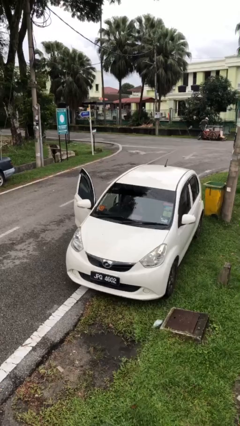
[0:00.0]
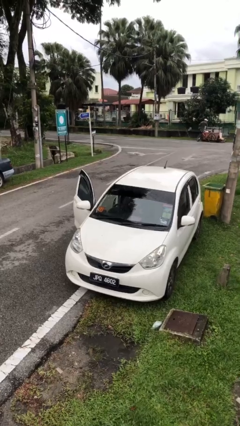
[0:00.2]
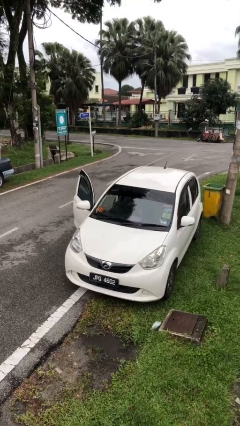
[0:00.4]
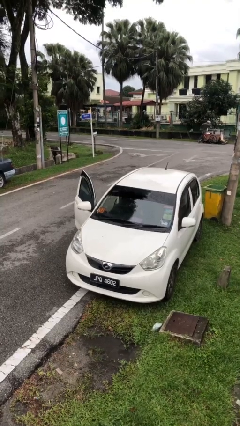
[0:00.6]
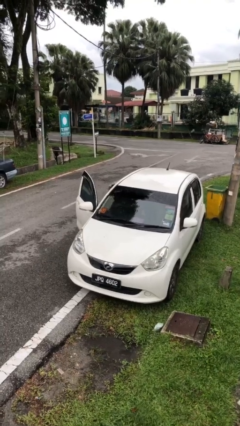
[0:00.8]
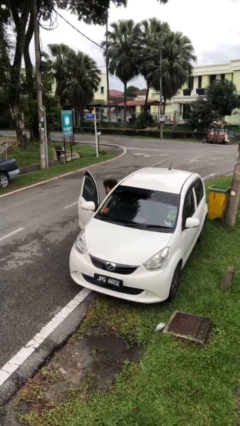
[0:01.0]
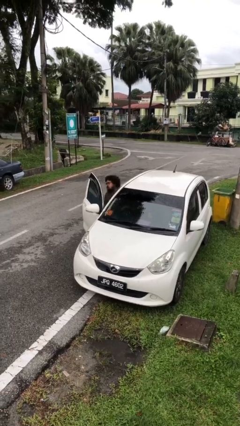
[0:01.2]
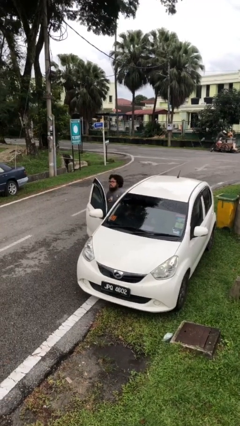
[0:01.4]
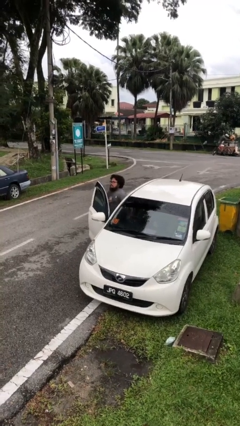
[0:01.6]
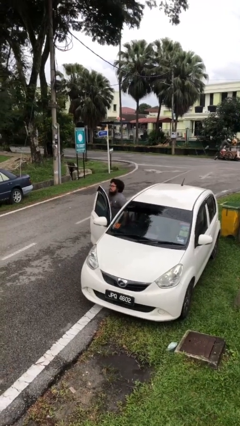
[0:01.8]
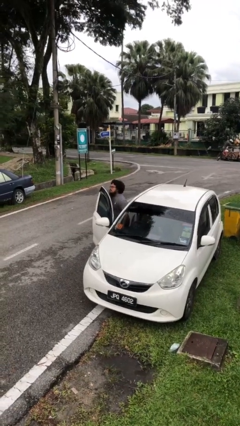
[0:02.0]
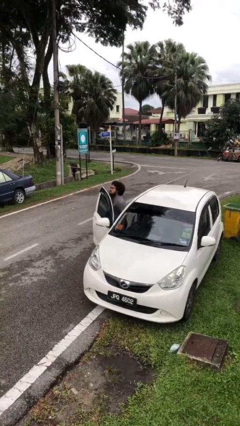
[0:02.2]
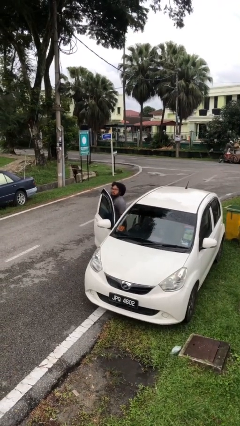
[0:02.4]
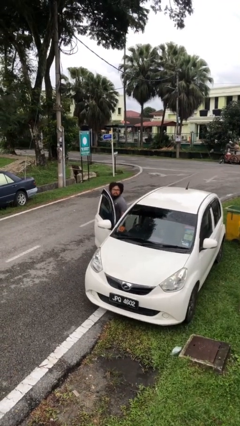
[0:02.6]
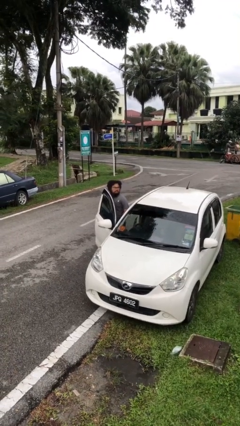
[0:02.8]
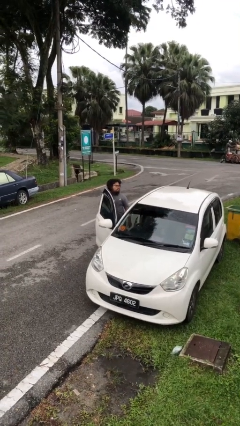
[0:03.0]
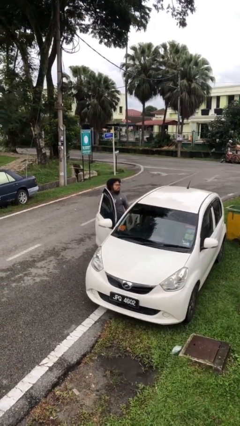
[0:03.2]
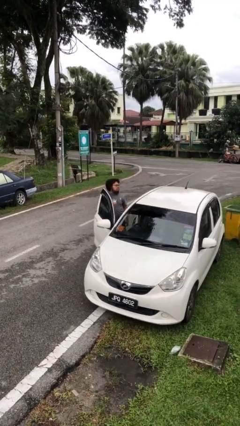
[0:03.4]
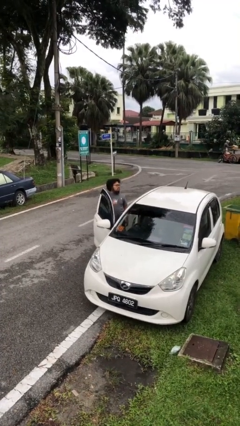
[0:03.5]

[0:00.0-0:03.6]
person exits car

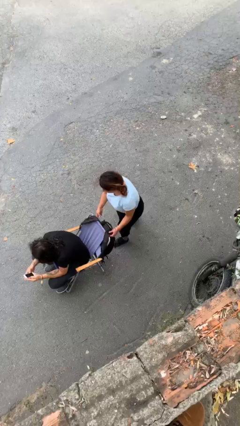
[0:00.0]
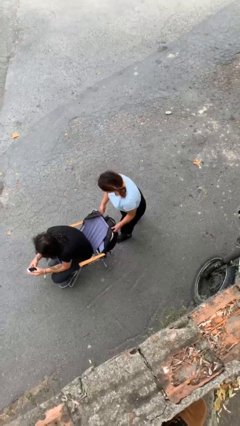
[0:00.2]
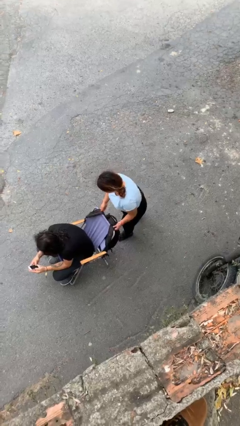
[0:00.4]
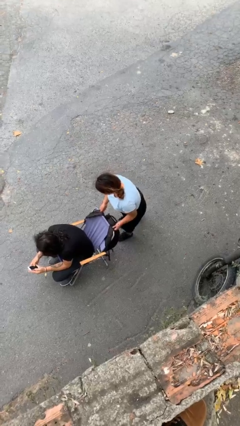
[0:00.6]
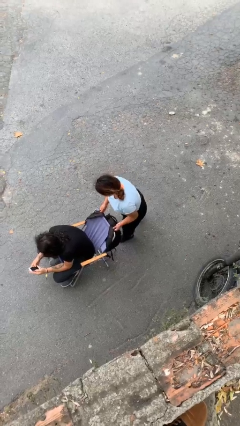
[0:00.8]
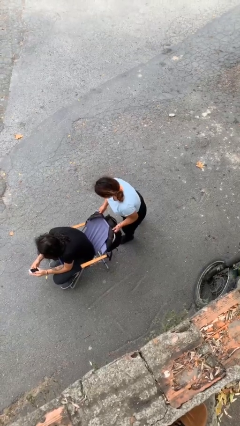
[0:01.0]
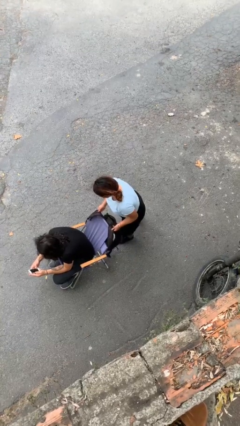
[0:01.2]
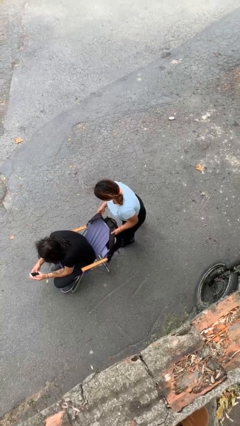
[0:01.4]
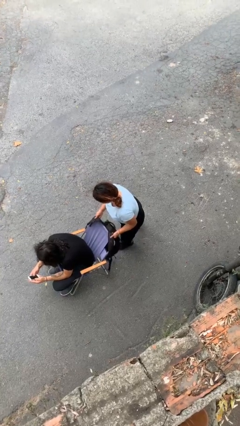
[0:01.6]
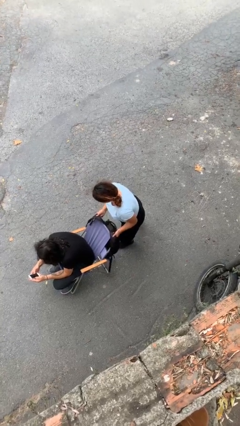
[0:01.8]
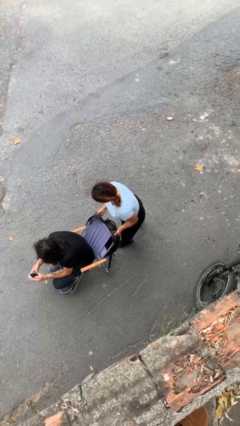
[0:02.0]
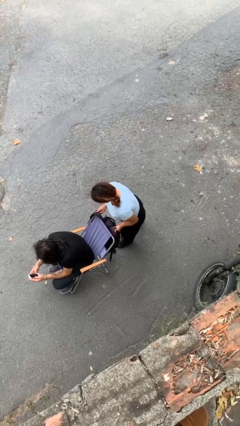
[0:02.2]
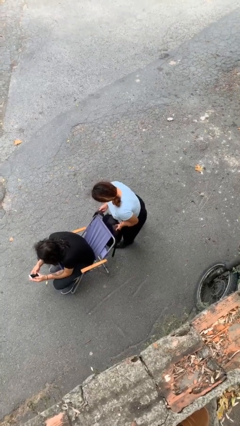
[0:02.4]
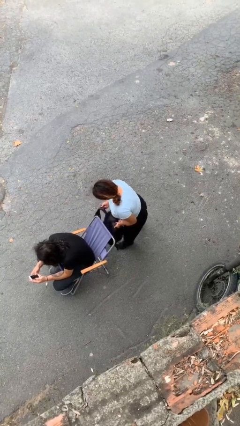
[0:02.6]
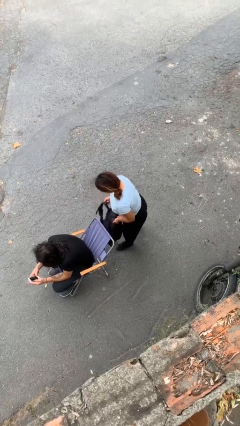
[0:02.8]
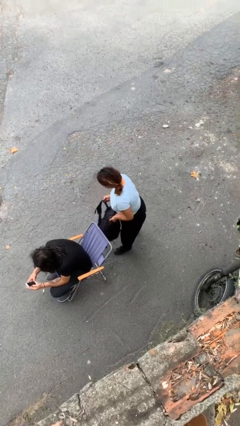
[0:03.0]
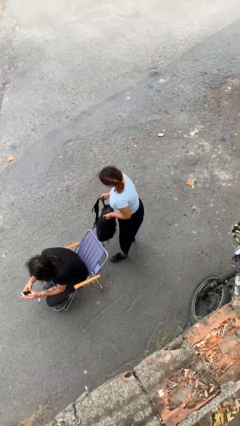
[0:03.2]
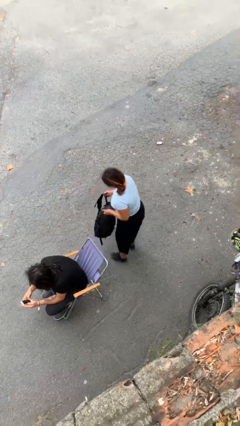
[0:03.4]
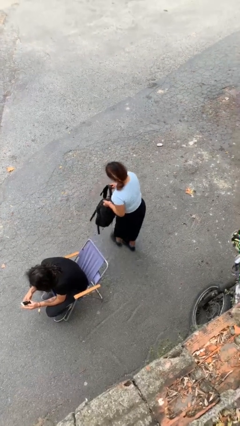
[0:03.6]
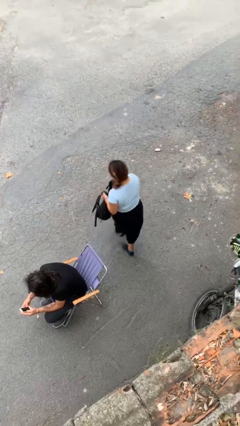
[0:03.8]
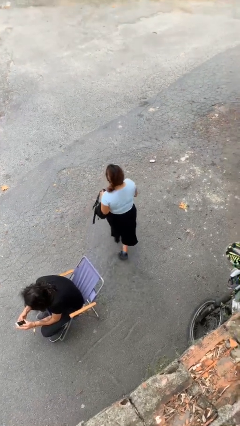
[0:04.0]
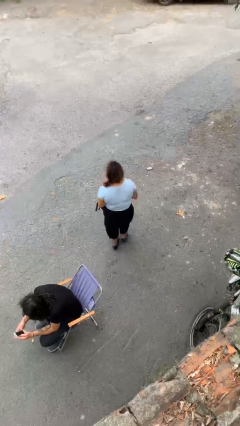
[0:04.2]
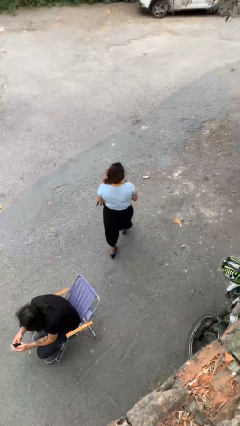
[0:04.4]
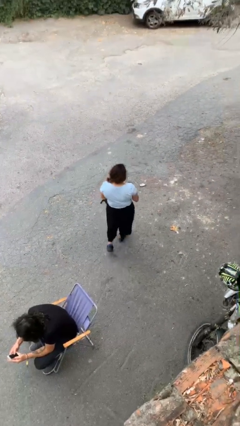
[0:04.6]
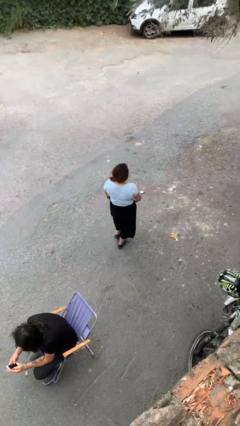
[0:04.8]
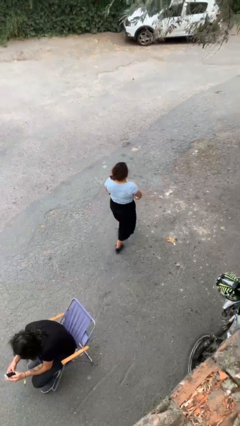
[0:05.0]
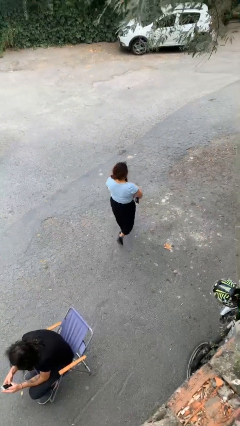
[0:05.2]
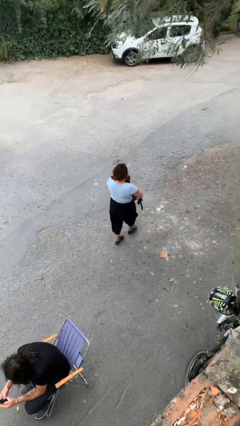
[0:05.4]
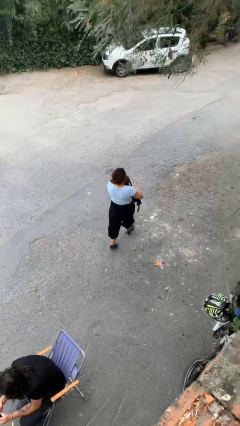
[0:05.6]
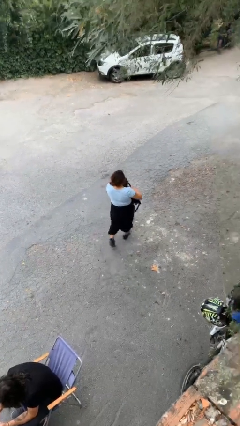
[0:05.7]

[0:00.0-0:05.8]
person steals object from person

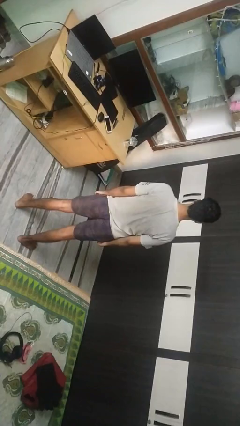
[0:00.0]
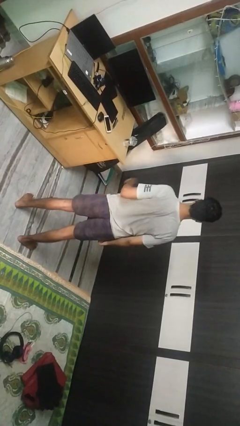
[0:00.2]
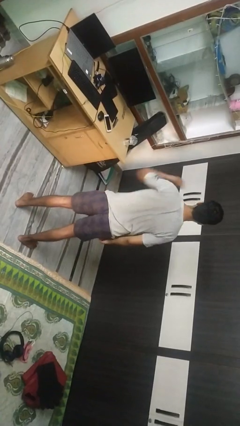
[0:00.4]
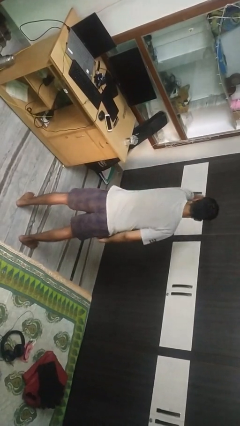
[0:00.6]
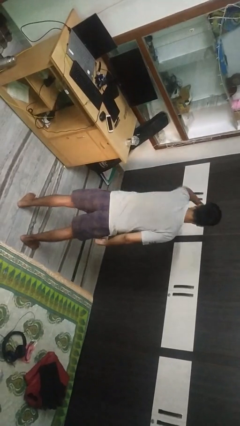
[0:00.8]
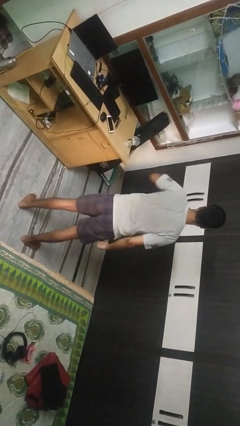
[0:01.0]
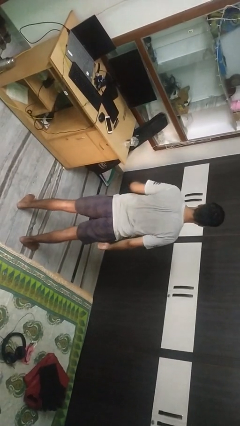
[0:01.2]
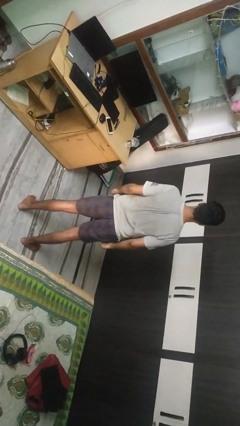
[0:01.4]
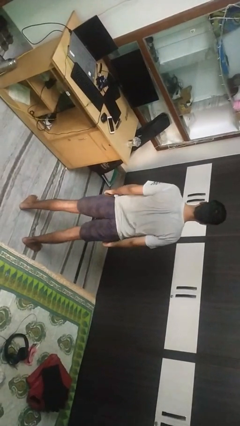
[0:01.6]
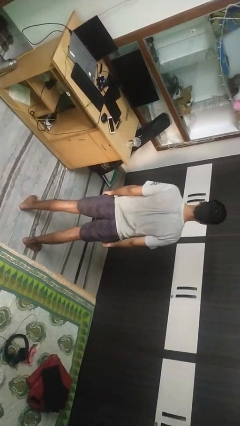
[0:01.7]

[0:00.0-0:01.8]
person punches

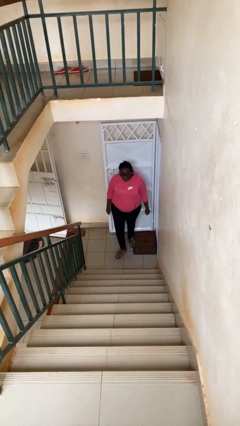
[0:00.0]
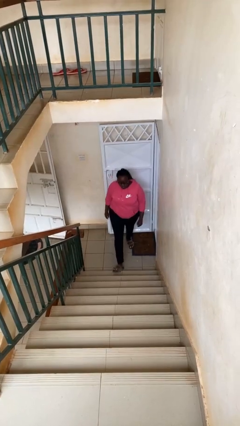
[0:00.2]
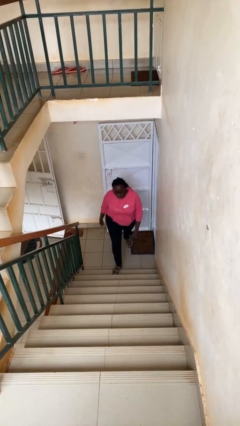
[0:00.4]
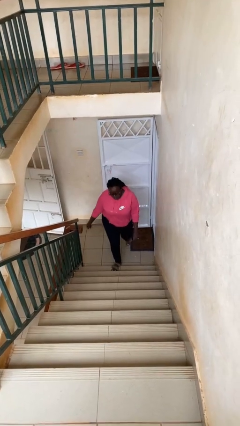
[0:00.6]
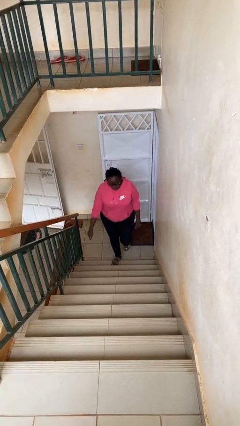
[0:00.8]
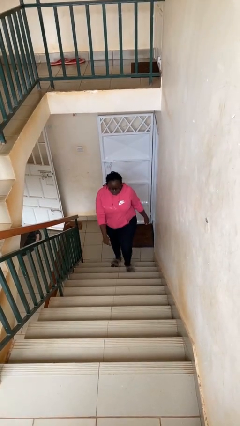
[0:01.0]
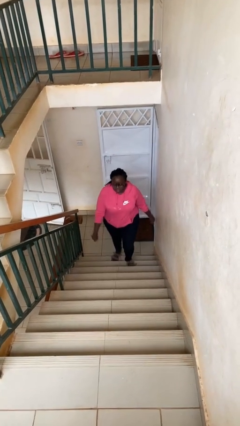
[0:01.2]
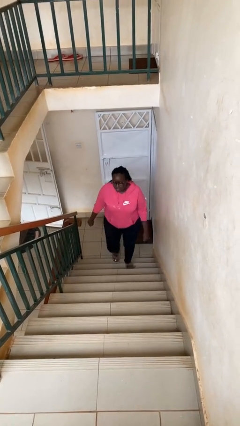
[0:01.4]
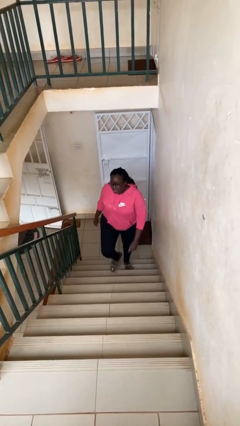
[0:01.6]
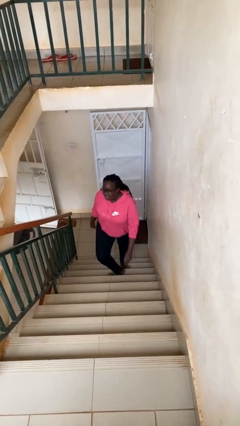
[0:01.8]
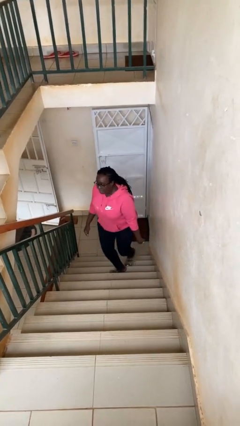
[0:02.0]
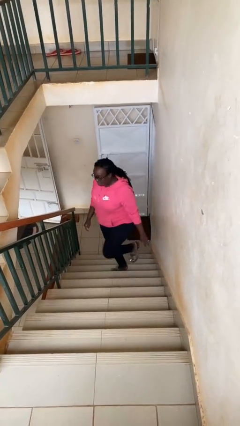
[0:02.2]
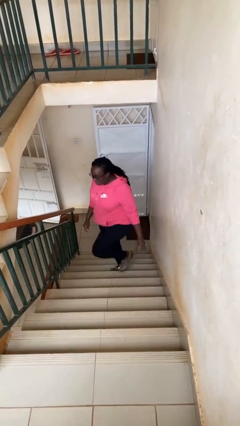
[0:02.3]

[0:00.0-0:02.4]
person climbs up stairs

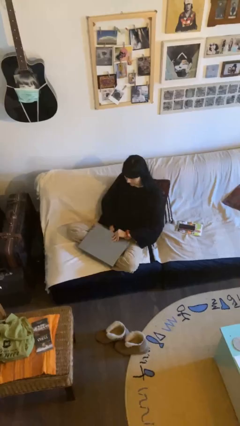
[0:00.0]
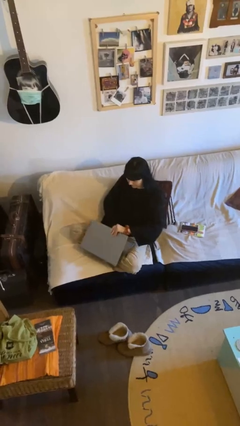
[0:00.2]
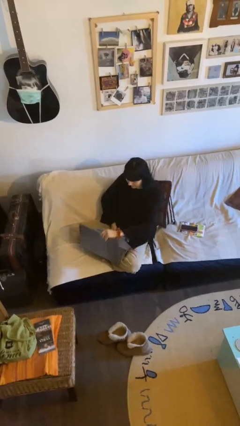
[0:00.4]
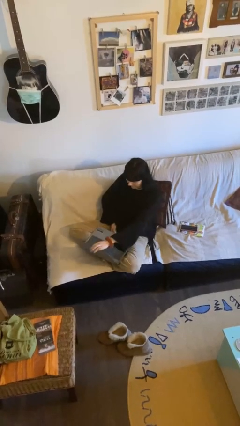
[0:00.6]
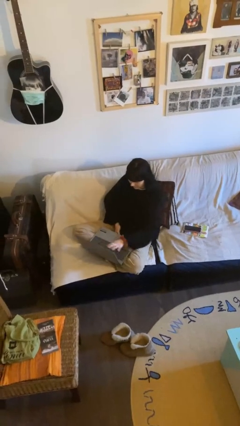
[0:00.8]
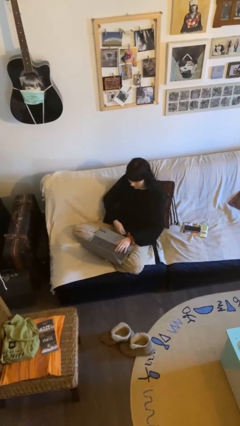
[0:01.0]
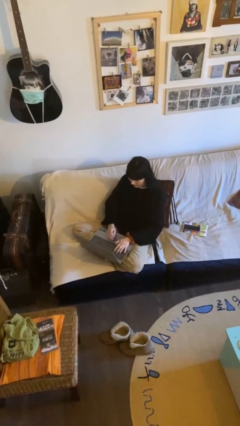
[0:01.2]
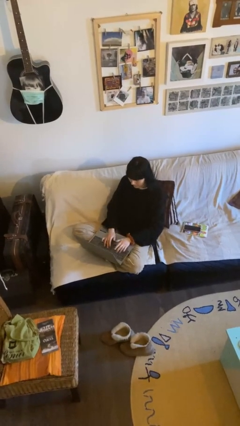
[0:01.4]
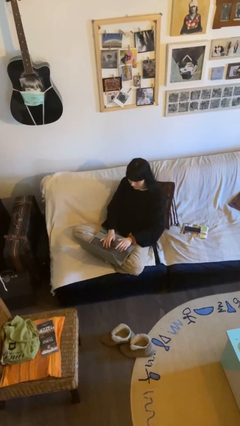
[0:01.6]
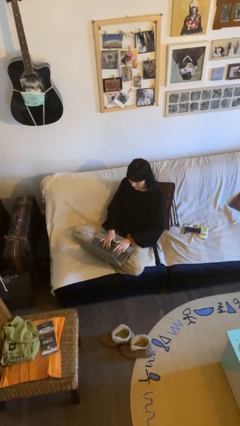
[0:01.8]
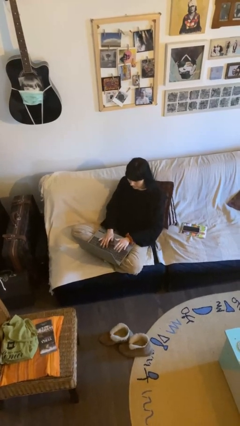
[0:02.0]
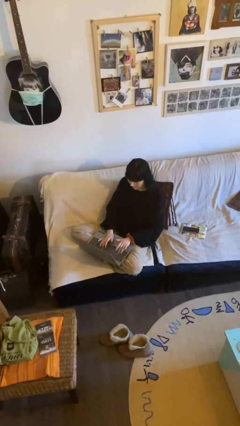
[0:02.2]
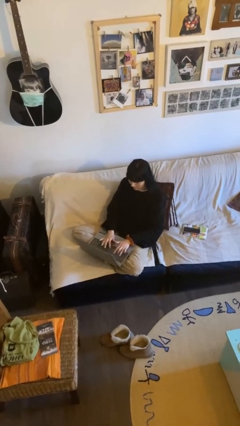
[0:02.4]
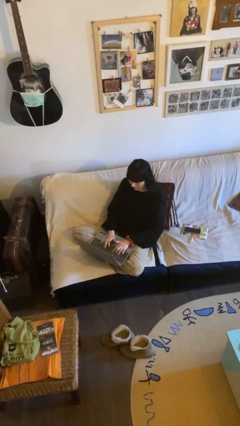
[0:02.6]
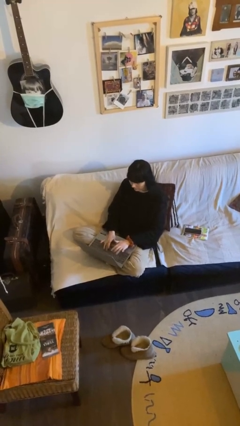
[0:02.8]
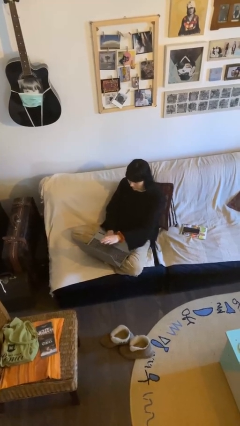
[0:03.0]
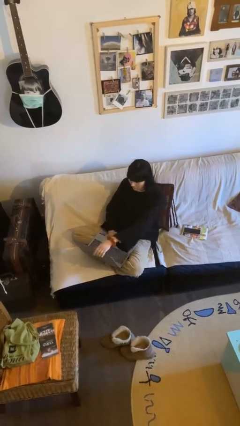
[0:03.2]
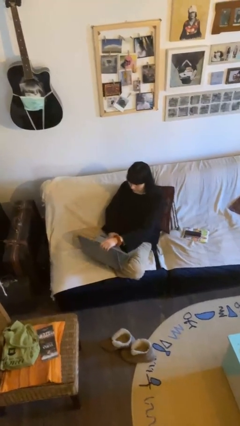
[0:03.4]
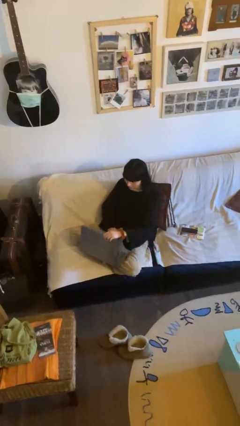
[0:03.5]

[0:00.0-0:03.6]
person interacts with laptop

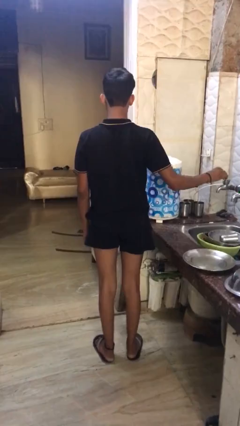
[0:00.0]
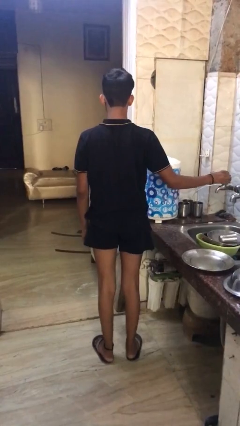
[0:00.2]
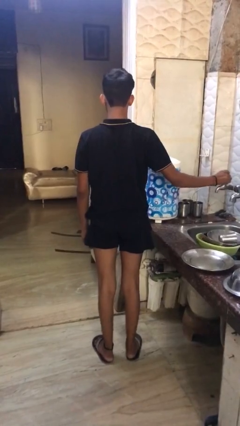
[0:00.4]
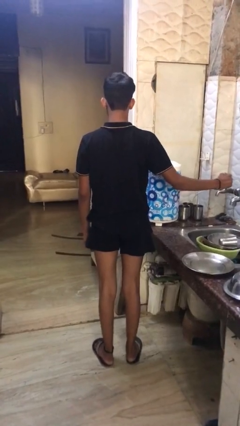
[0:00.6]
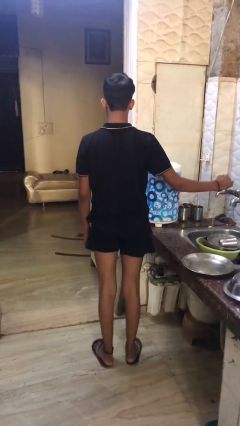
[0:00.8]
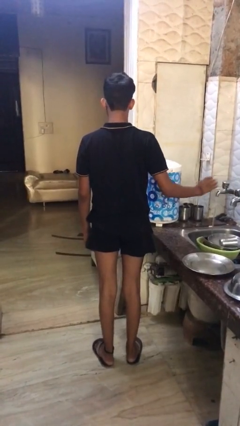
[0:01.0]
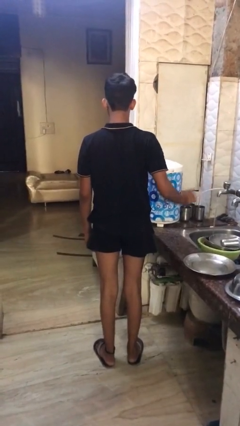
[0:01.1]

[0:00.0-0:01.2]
person turns on faucet
